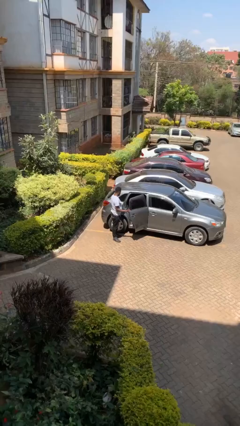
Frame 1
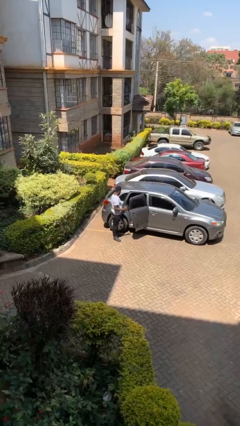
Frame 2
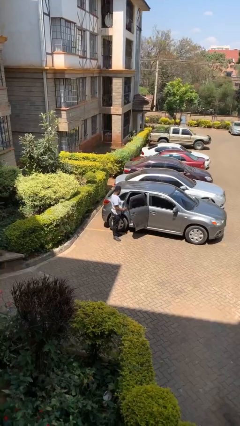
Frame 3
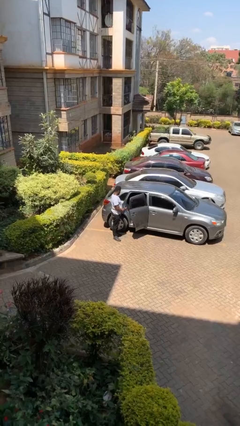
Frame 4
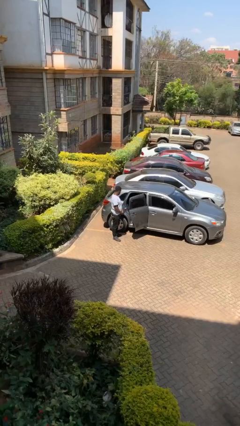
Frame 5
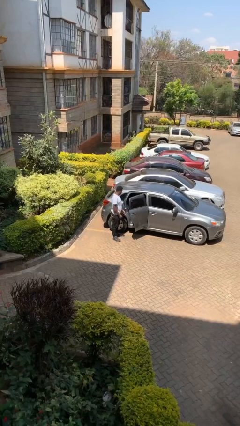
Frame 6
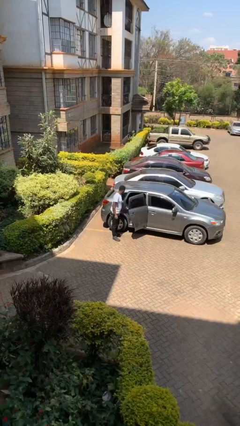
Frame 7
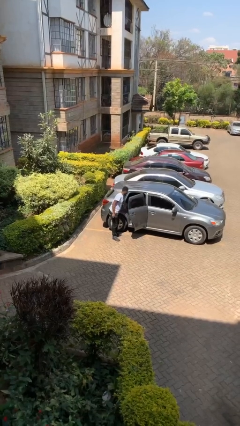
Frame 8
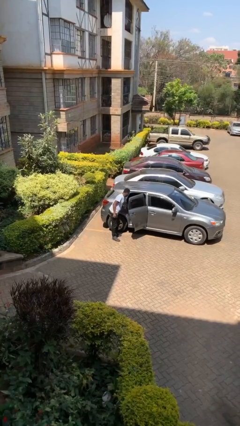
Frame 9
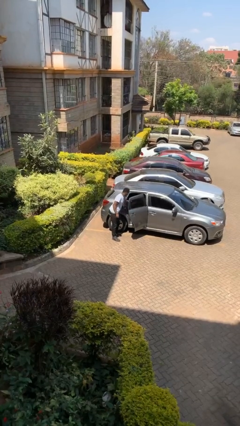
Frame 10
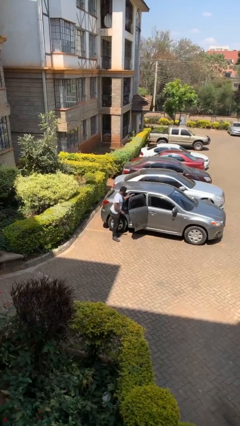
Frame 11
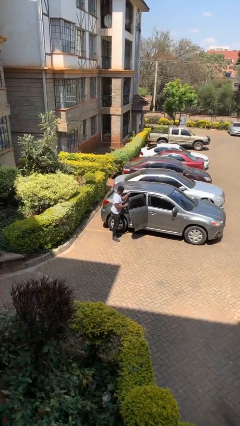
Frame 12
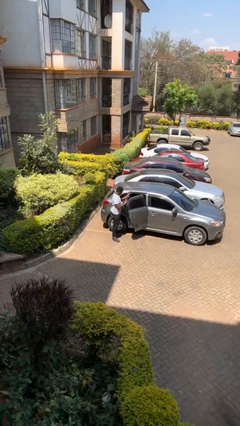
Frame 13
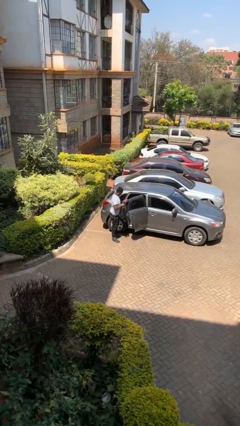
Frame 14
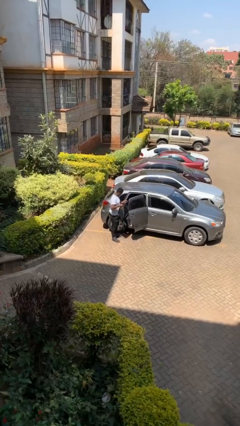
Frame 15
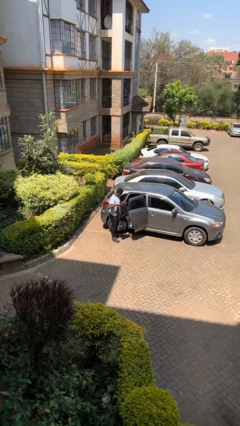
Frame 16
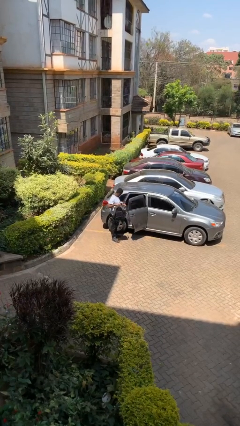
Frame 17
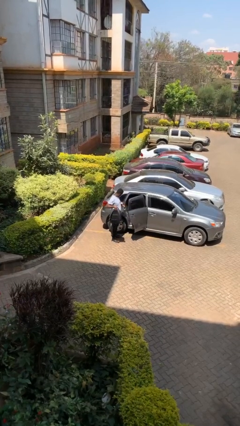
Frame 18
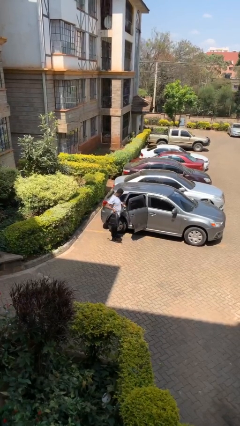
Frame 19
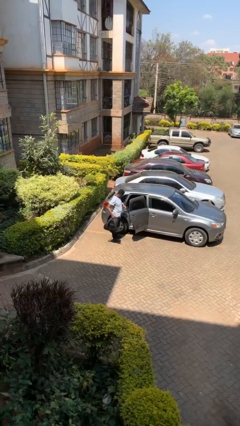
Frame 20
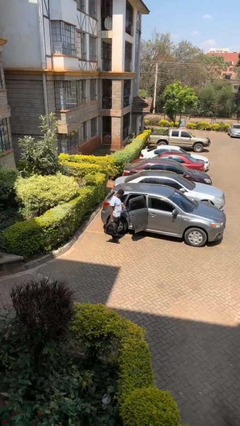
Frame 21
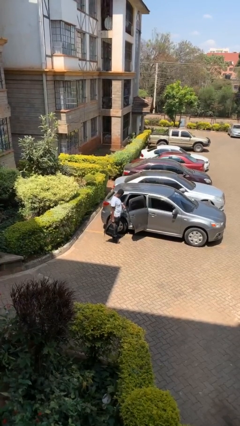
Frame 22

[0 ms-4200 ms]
person unloads car

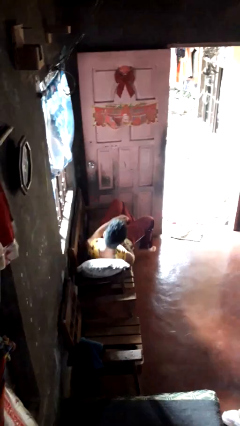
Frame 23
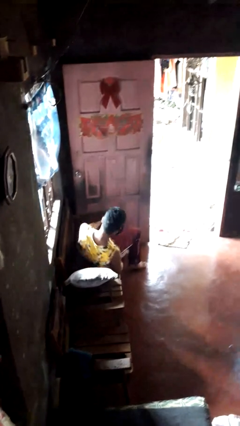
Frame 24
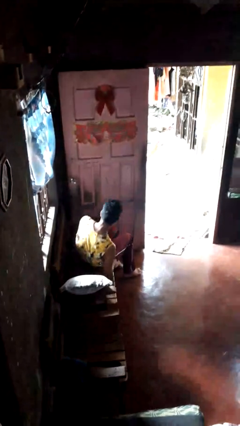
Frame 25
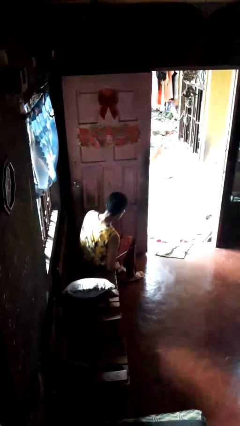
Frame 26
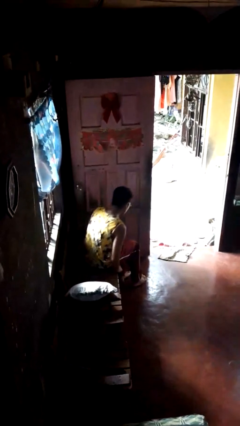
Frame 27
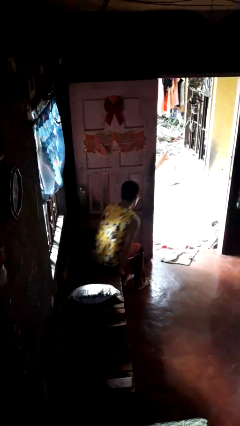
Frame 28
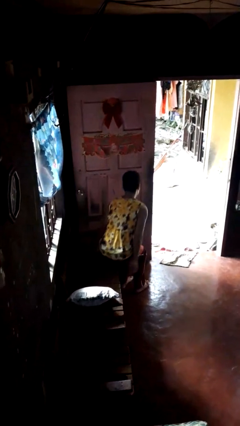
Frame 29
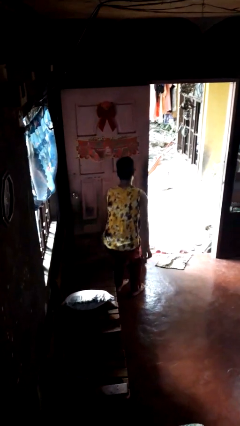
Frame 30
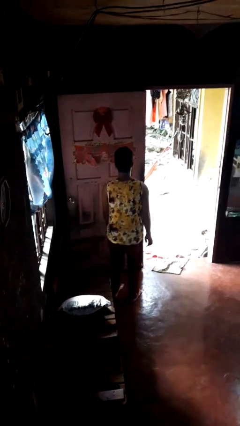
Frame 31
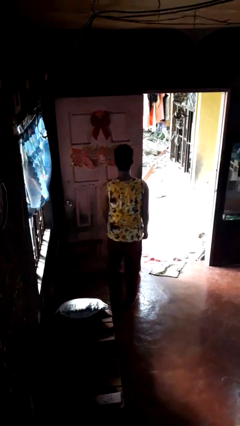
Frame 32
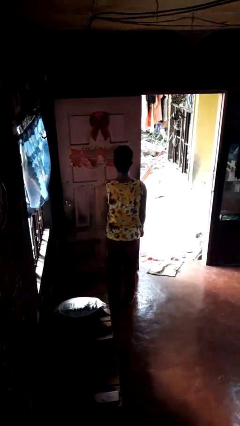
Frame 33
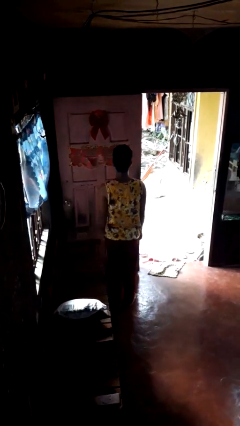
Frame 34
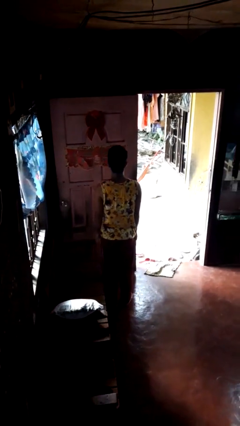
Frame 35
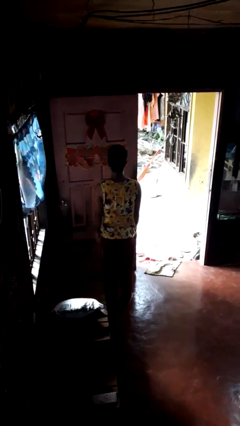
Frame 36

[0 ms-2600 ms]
person stands up

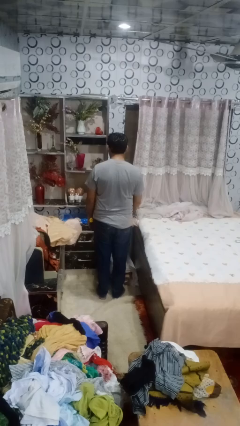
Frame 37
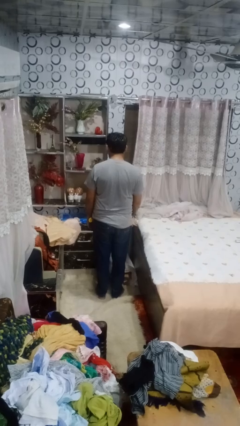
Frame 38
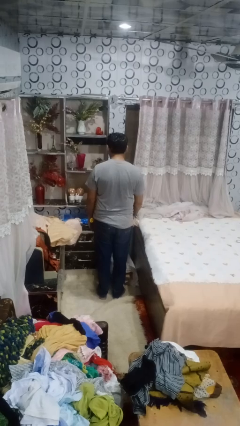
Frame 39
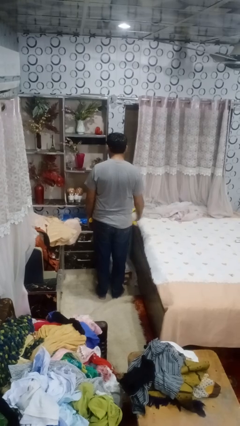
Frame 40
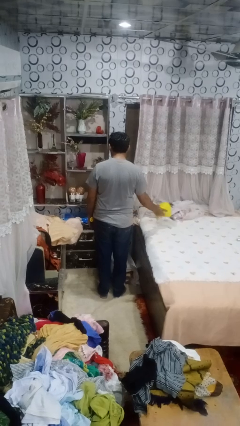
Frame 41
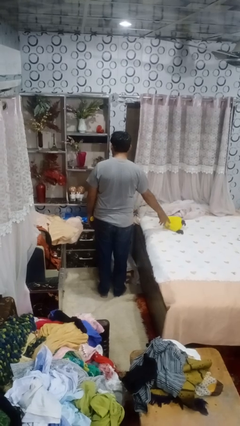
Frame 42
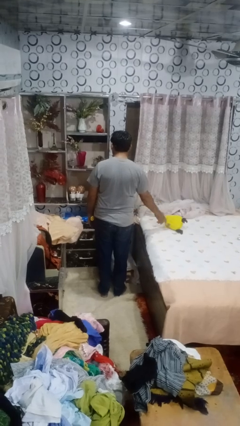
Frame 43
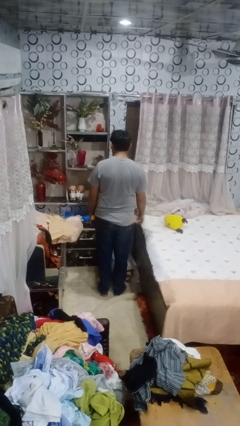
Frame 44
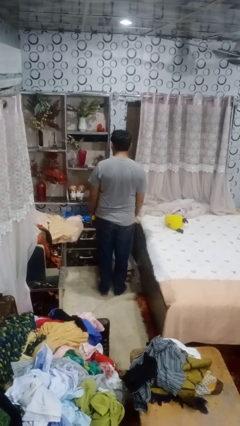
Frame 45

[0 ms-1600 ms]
person throws object on bed

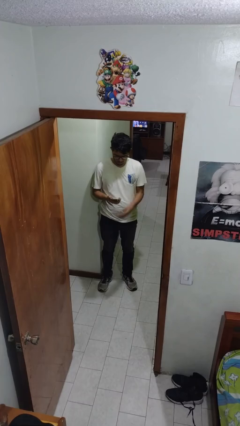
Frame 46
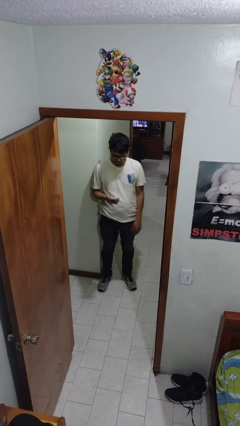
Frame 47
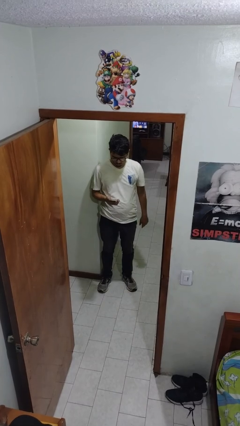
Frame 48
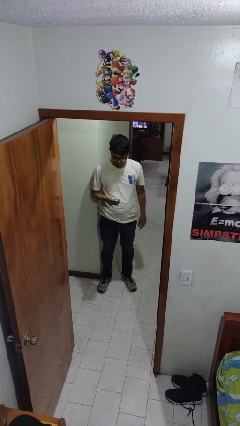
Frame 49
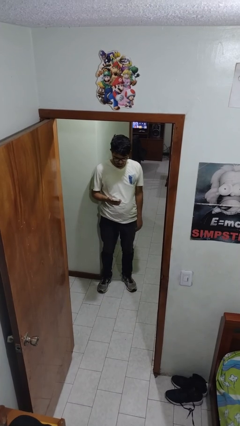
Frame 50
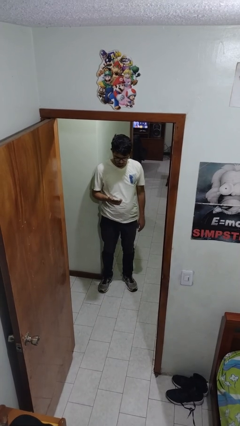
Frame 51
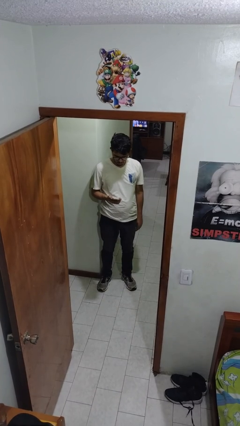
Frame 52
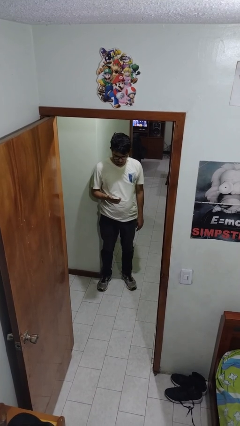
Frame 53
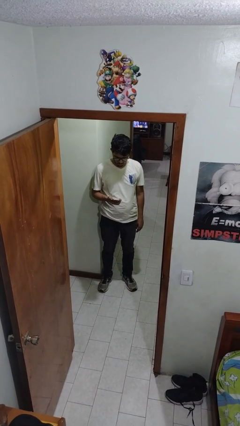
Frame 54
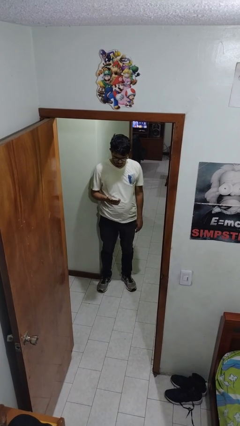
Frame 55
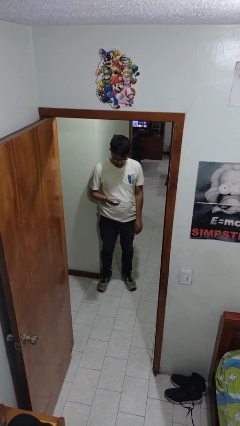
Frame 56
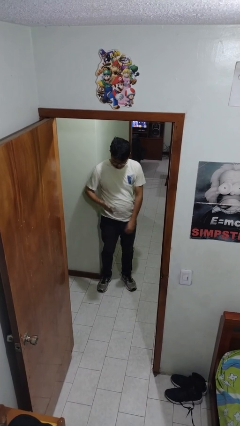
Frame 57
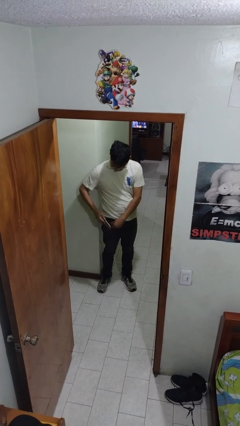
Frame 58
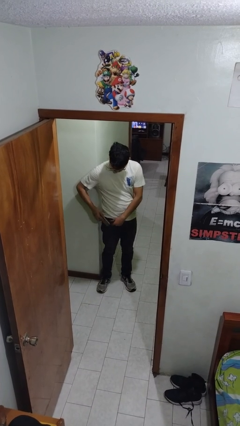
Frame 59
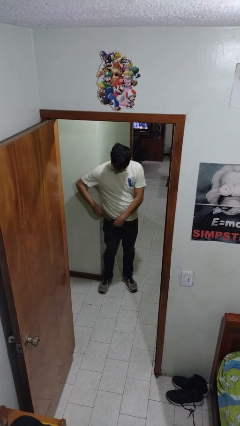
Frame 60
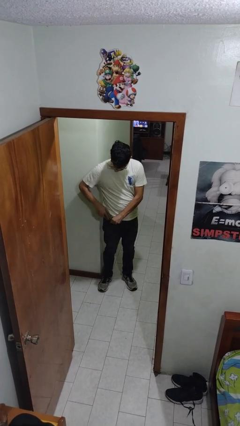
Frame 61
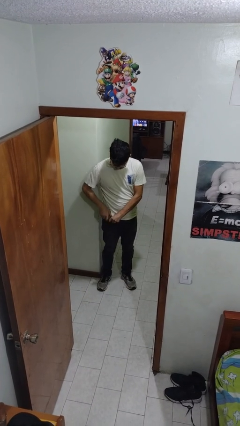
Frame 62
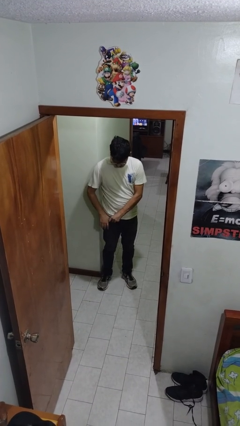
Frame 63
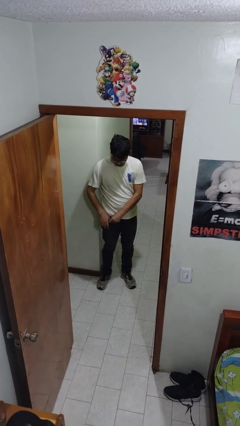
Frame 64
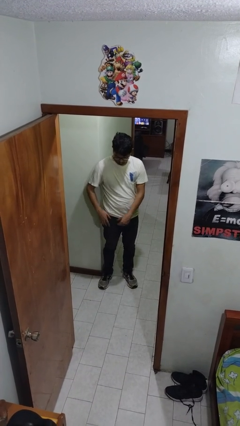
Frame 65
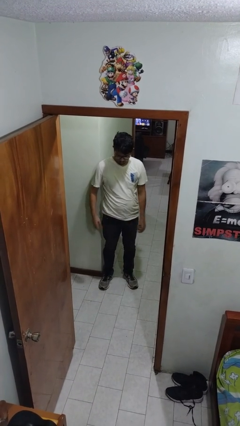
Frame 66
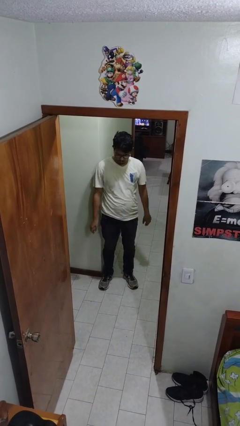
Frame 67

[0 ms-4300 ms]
person puts phone into pocket

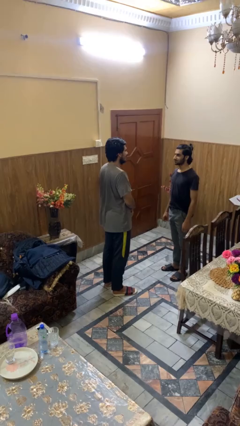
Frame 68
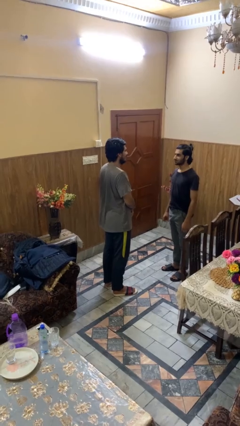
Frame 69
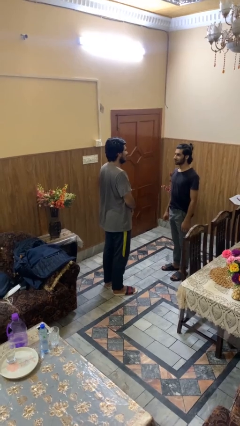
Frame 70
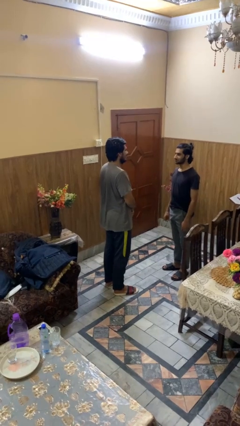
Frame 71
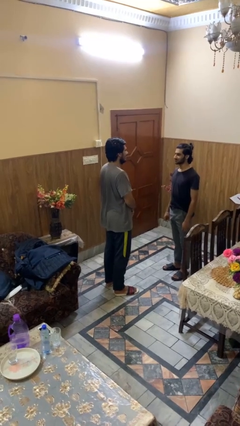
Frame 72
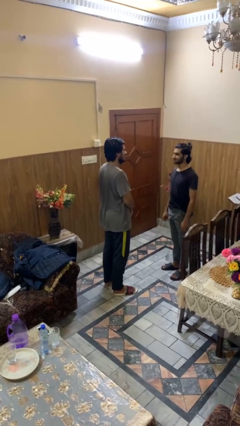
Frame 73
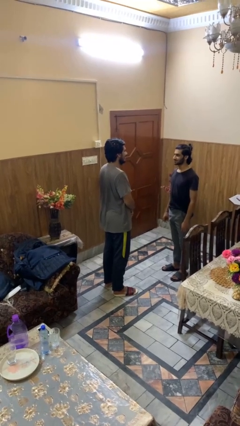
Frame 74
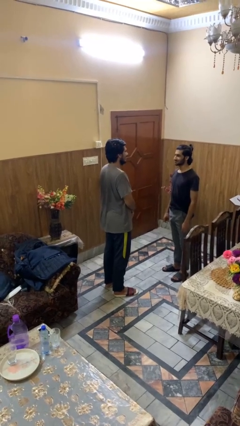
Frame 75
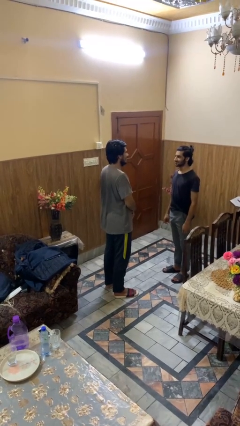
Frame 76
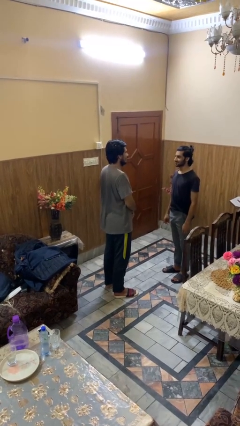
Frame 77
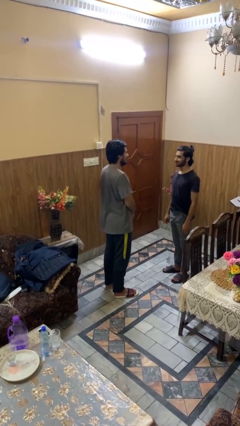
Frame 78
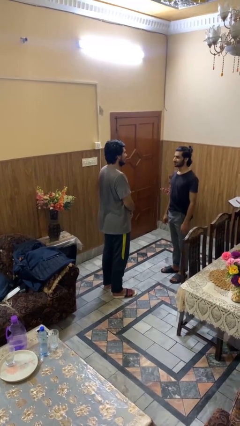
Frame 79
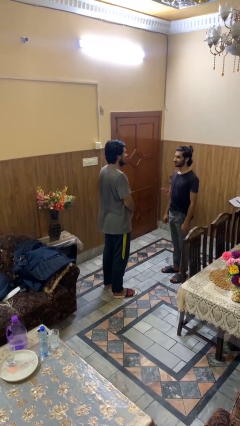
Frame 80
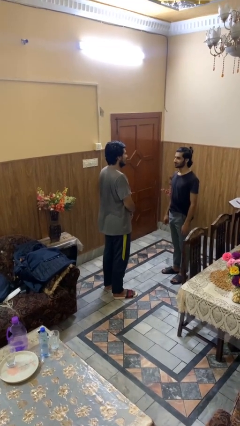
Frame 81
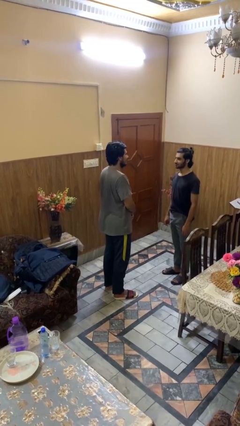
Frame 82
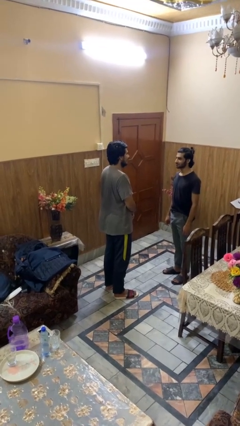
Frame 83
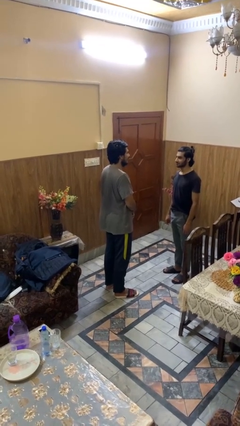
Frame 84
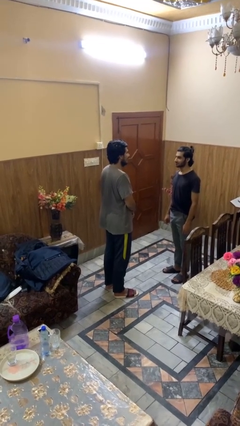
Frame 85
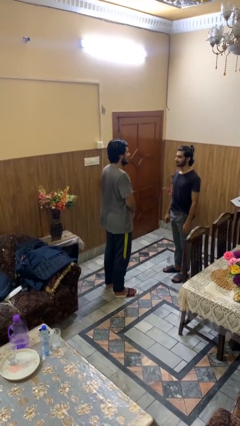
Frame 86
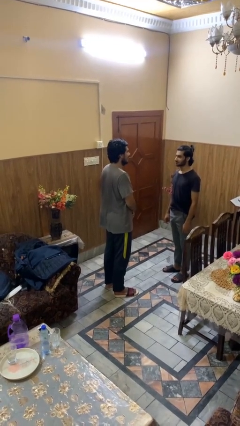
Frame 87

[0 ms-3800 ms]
person laughs with person

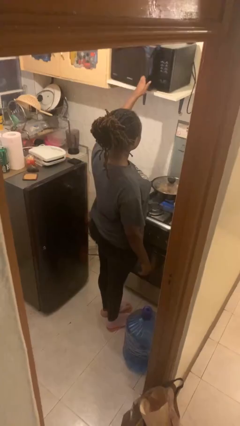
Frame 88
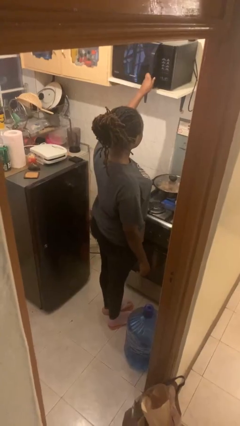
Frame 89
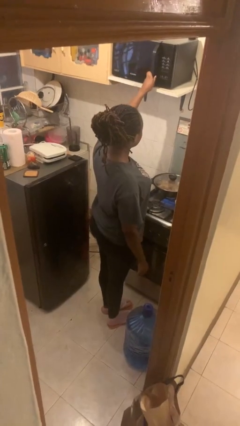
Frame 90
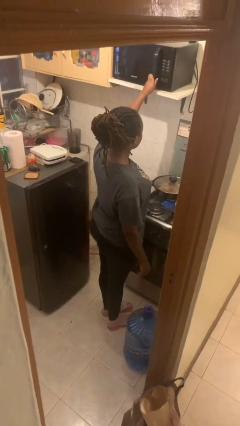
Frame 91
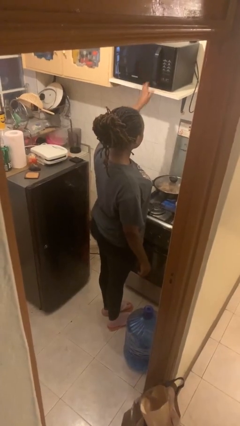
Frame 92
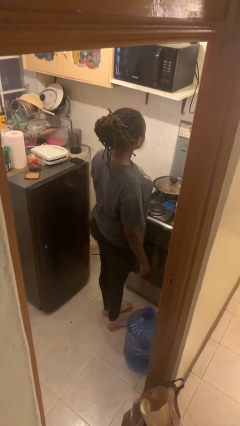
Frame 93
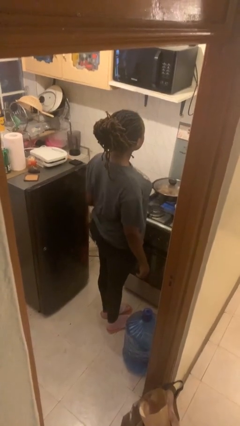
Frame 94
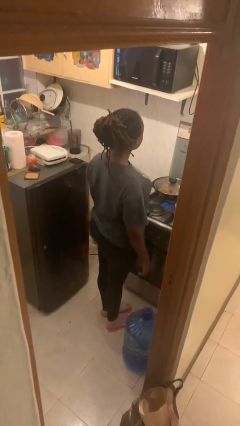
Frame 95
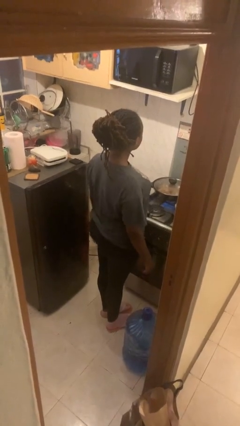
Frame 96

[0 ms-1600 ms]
person closes microwave
